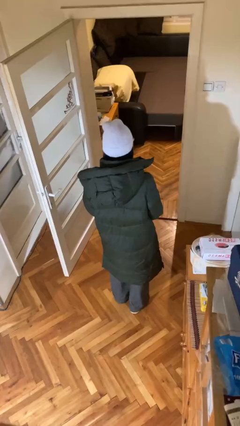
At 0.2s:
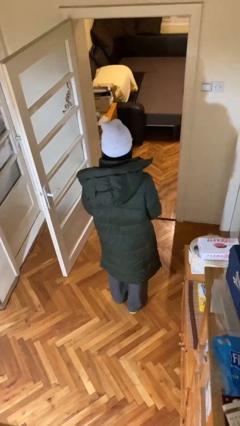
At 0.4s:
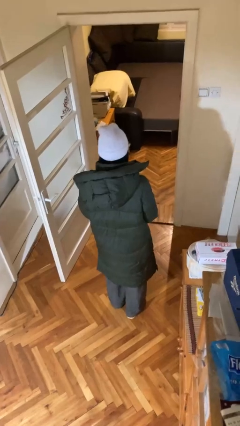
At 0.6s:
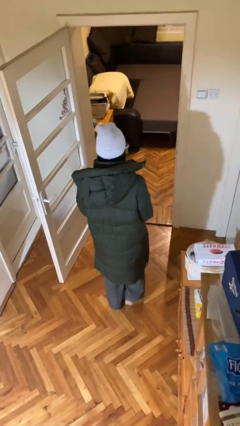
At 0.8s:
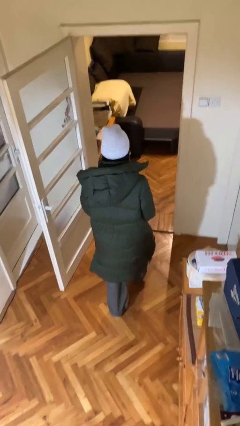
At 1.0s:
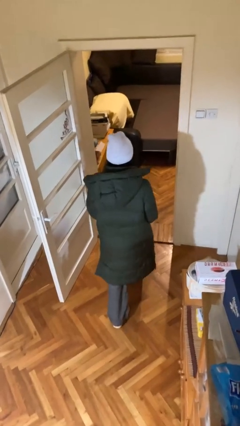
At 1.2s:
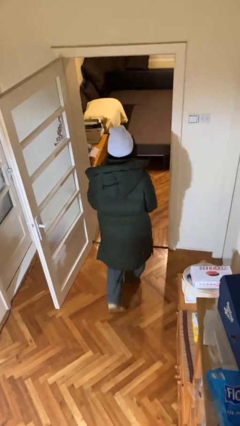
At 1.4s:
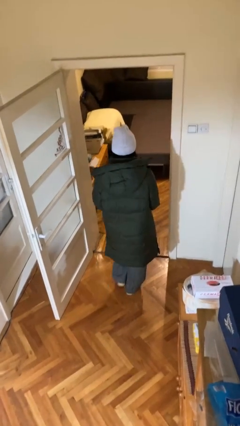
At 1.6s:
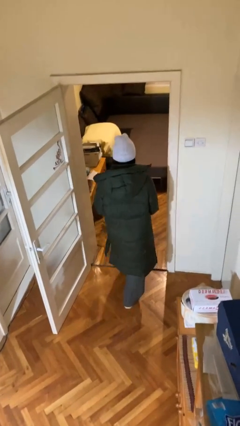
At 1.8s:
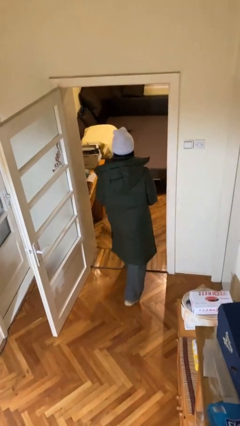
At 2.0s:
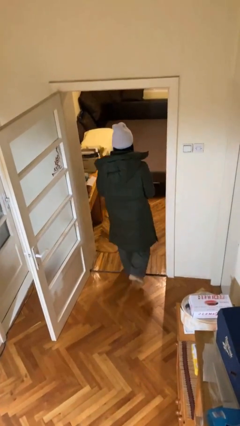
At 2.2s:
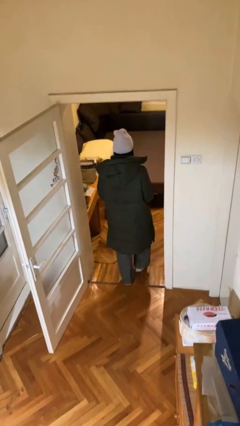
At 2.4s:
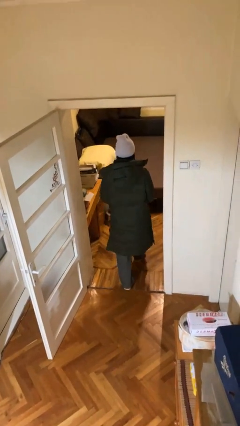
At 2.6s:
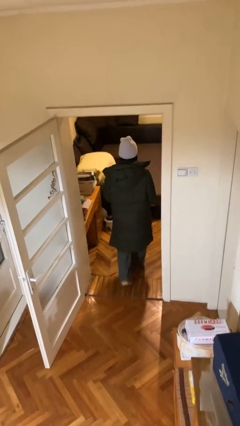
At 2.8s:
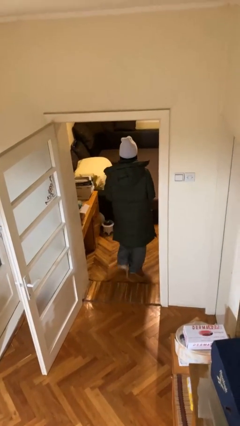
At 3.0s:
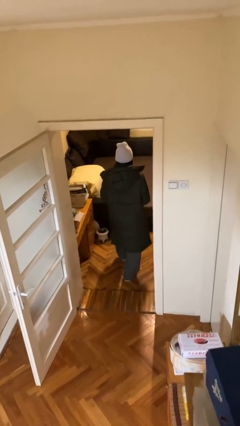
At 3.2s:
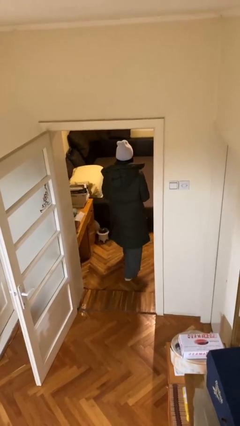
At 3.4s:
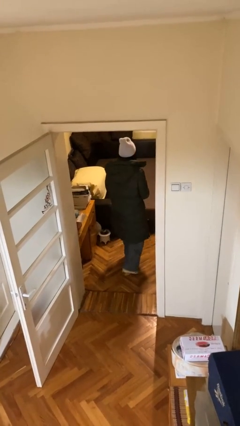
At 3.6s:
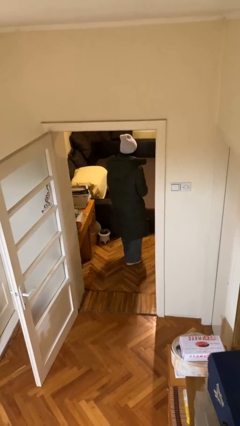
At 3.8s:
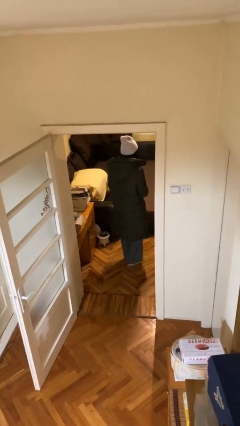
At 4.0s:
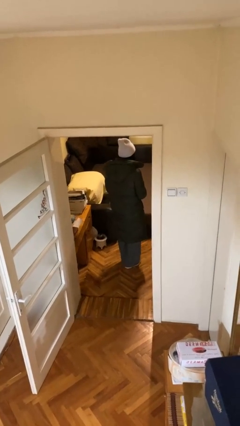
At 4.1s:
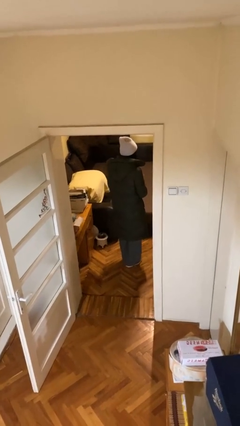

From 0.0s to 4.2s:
person exits scene through structure

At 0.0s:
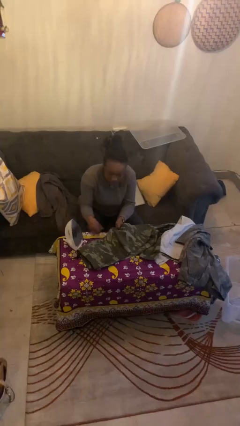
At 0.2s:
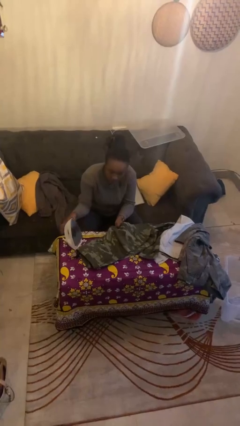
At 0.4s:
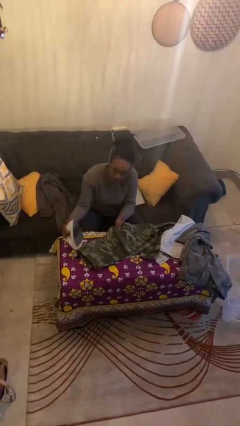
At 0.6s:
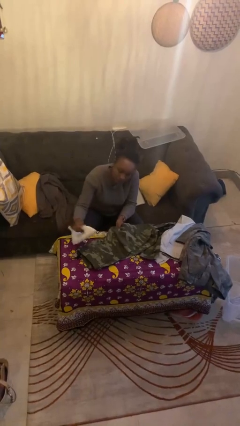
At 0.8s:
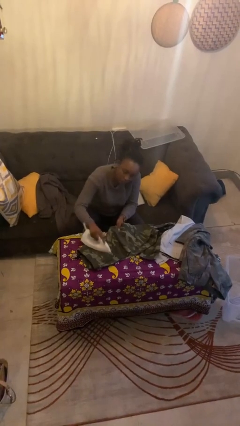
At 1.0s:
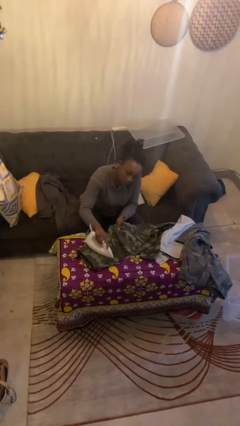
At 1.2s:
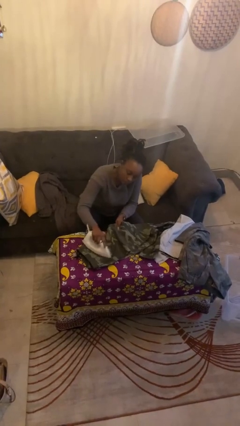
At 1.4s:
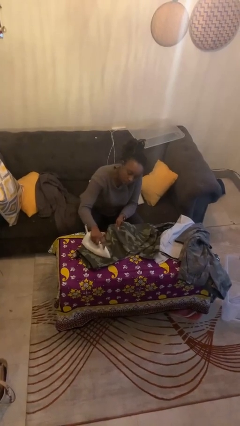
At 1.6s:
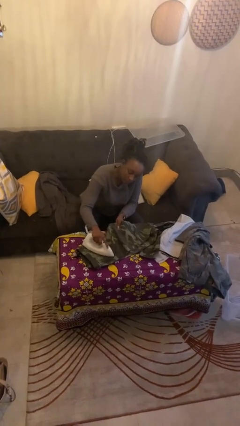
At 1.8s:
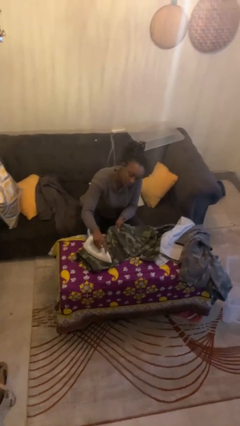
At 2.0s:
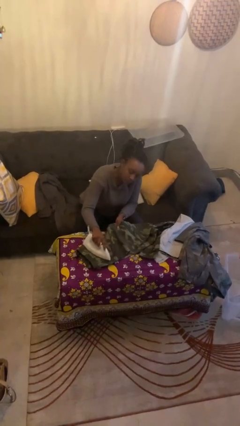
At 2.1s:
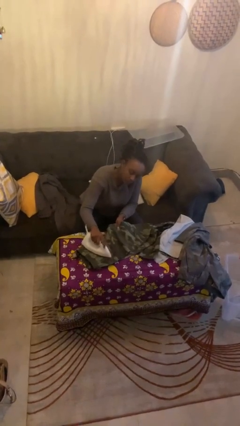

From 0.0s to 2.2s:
person irons clothes

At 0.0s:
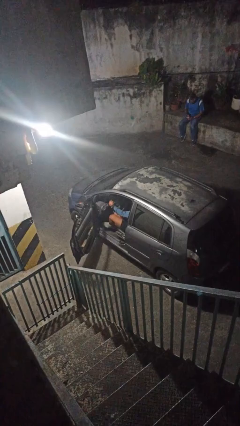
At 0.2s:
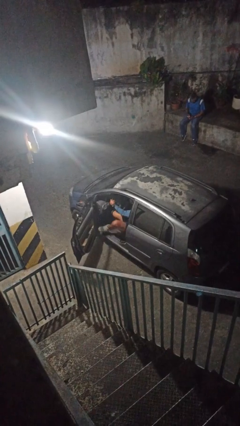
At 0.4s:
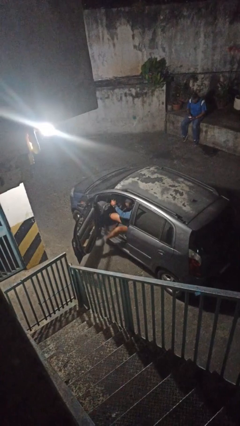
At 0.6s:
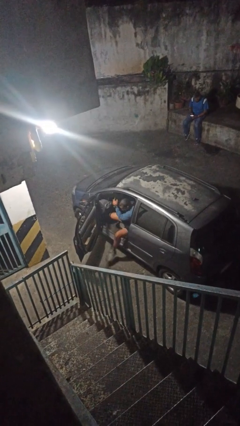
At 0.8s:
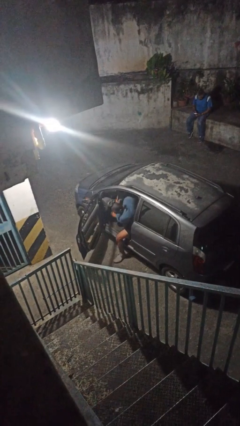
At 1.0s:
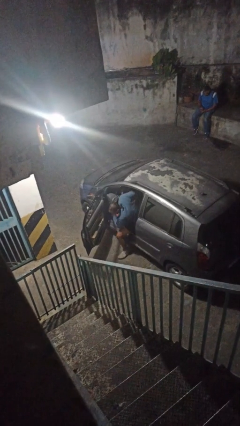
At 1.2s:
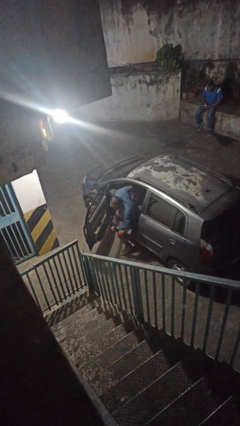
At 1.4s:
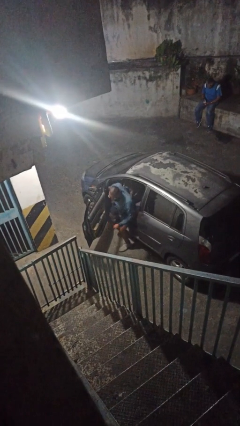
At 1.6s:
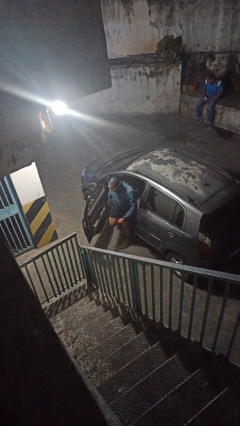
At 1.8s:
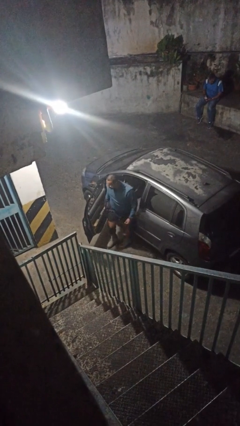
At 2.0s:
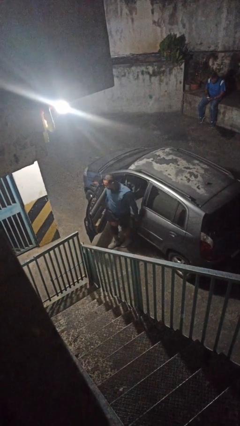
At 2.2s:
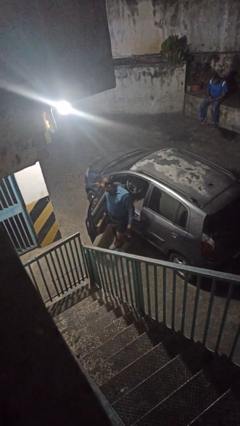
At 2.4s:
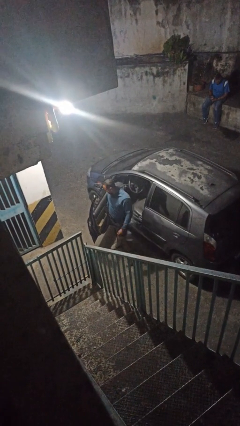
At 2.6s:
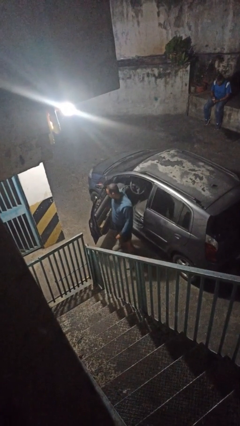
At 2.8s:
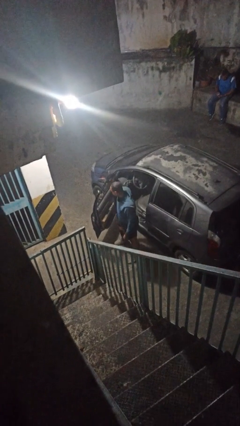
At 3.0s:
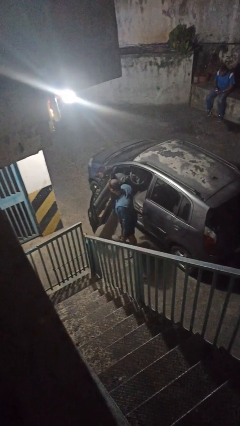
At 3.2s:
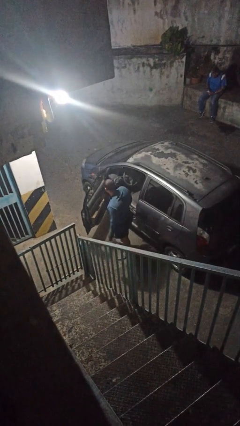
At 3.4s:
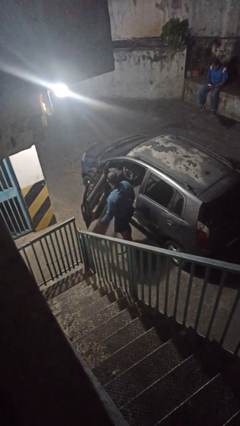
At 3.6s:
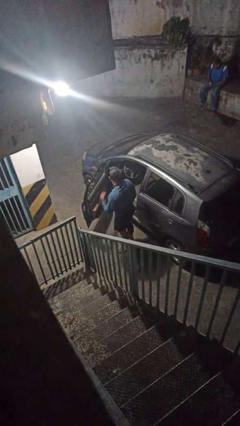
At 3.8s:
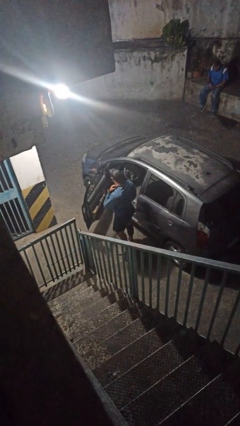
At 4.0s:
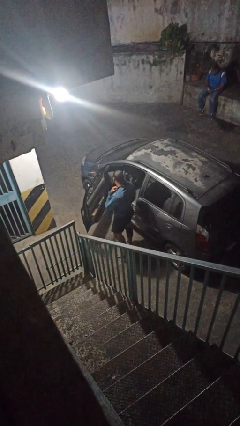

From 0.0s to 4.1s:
person exits car

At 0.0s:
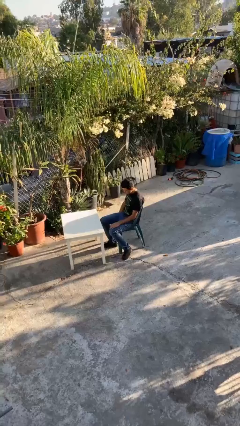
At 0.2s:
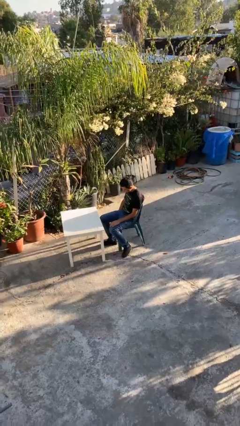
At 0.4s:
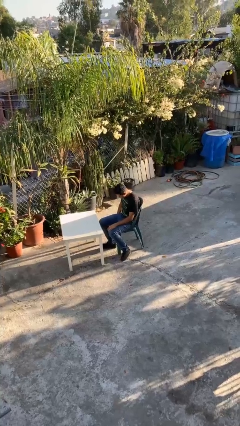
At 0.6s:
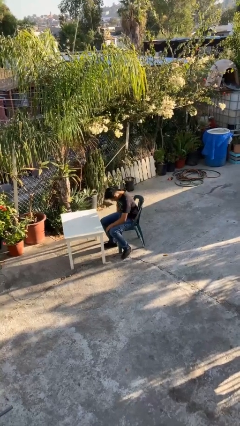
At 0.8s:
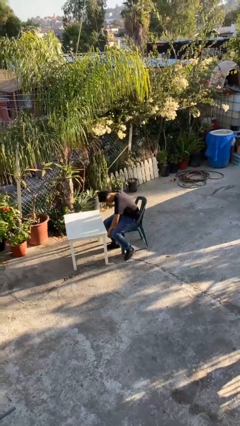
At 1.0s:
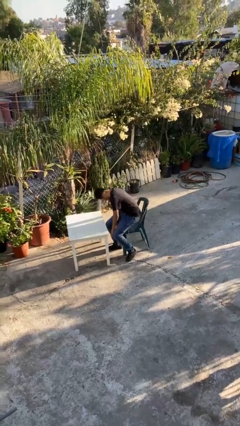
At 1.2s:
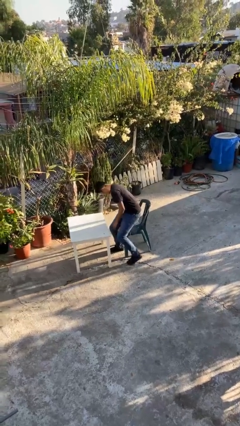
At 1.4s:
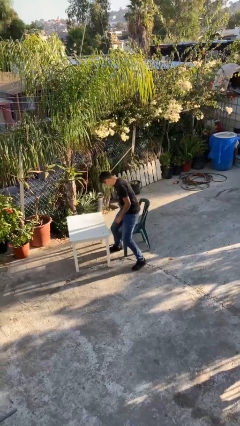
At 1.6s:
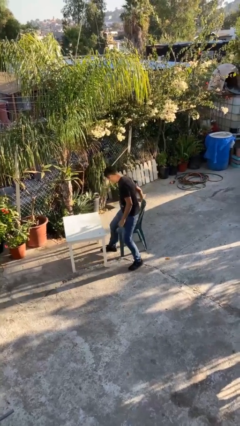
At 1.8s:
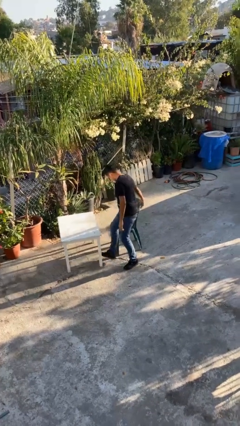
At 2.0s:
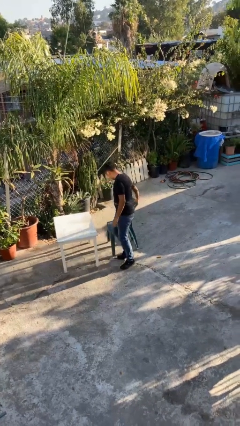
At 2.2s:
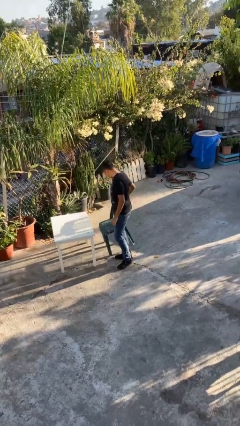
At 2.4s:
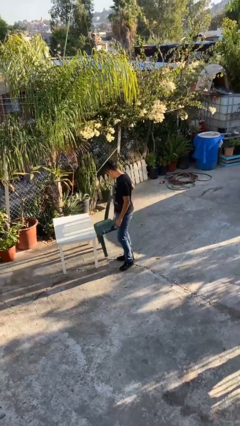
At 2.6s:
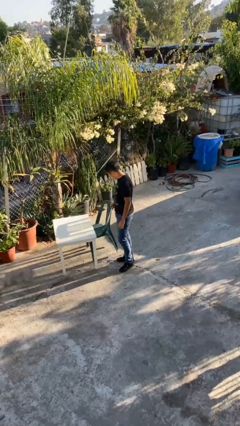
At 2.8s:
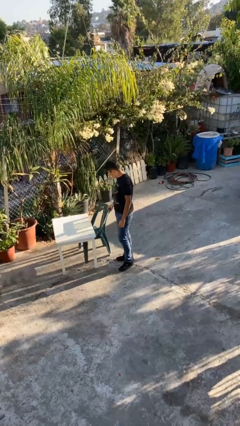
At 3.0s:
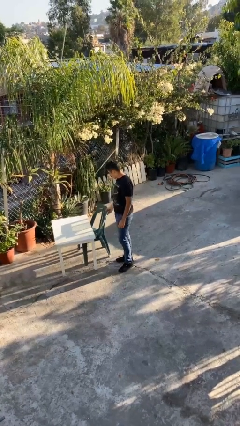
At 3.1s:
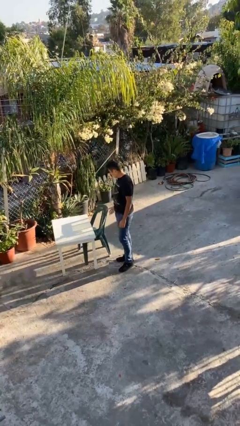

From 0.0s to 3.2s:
person stands up

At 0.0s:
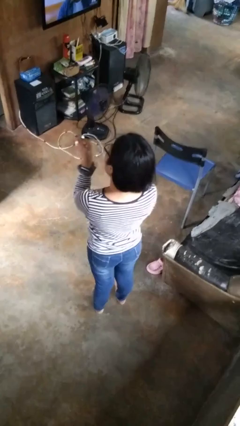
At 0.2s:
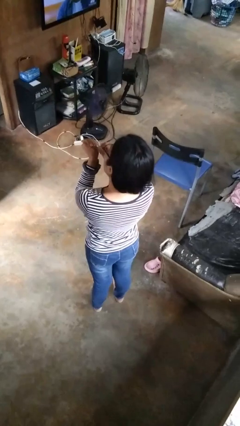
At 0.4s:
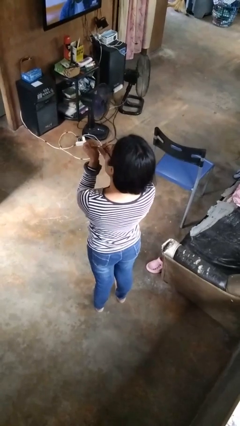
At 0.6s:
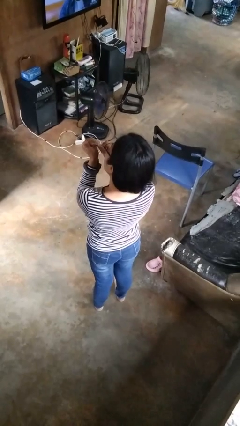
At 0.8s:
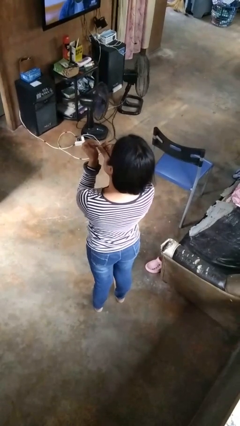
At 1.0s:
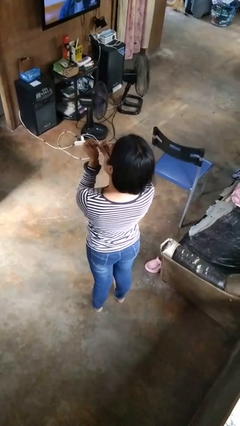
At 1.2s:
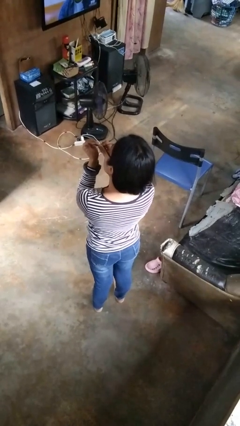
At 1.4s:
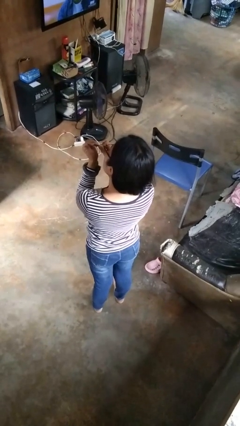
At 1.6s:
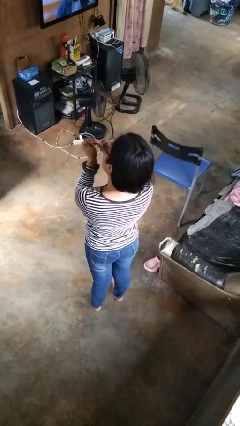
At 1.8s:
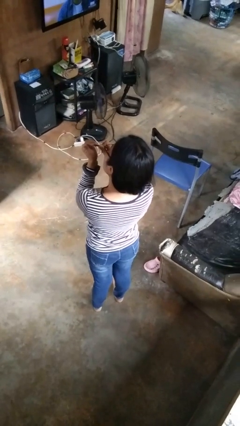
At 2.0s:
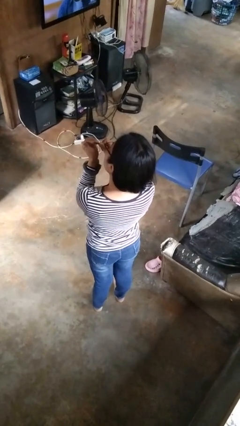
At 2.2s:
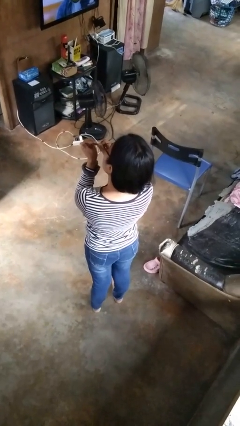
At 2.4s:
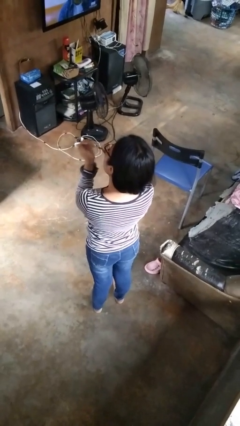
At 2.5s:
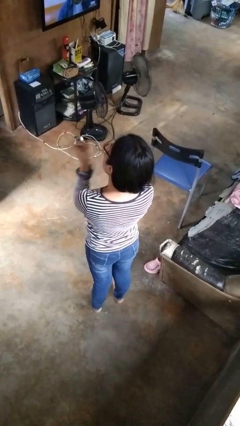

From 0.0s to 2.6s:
person files fingernails

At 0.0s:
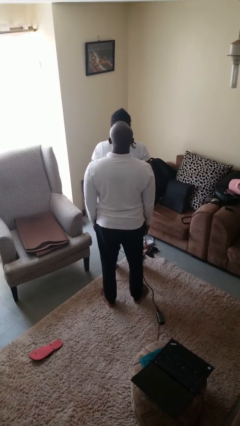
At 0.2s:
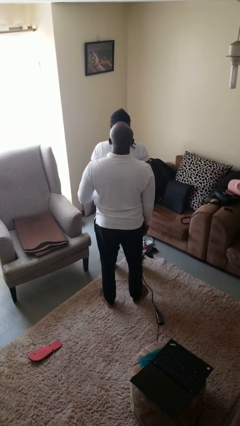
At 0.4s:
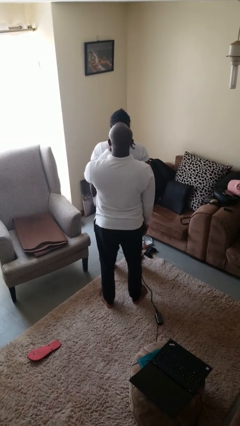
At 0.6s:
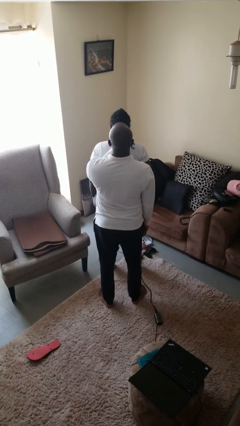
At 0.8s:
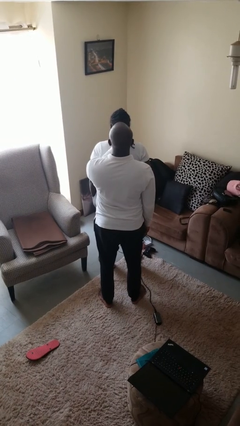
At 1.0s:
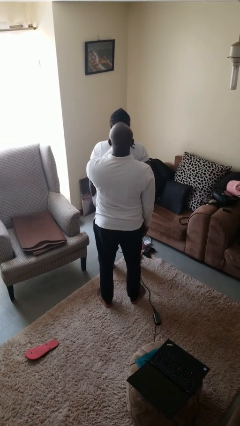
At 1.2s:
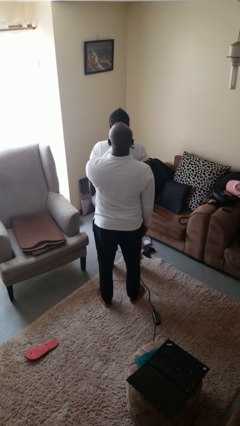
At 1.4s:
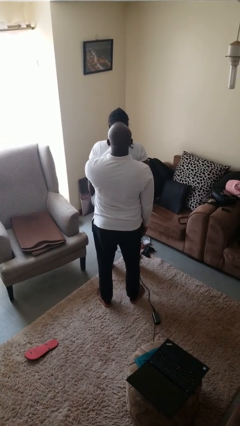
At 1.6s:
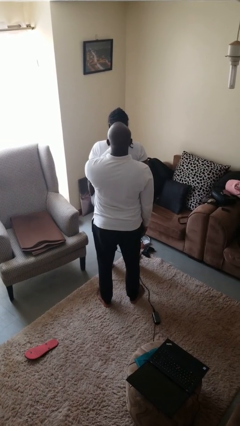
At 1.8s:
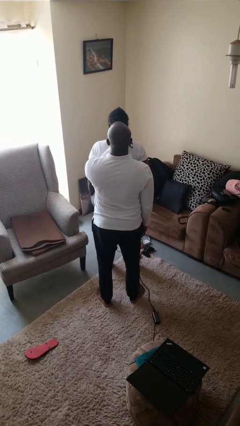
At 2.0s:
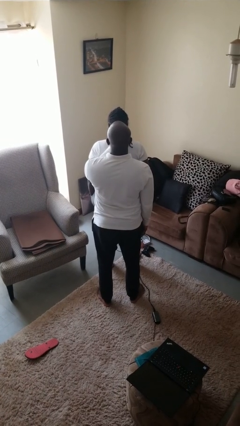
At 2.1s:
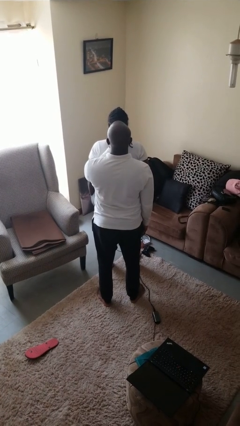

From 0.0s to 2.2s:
person grabs person by hair
